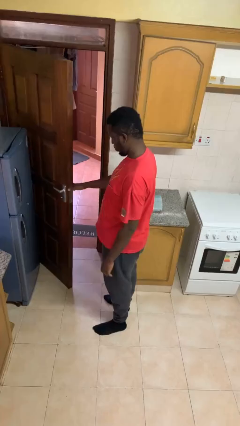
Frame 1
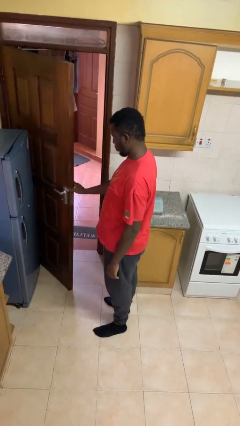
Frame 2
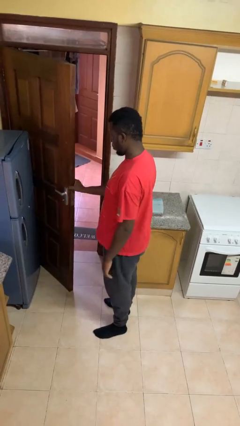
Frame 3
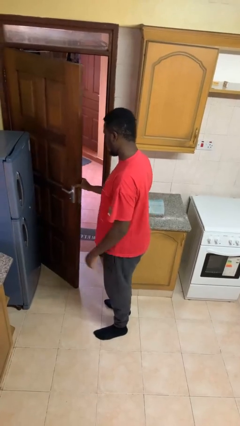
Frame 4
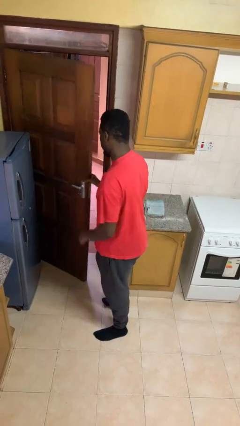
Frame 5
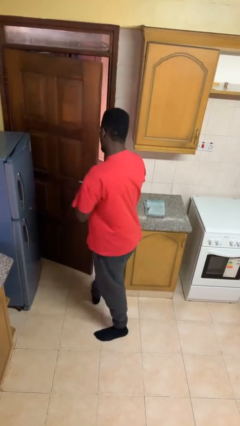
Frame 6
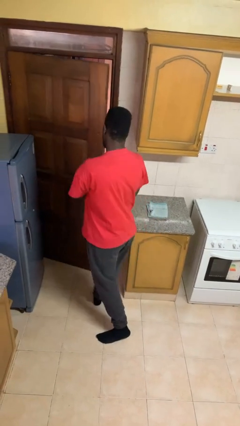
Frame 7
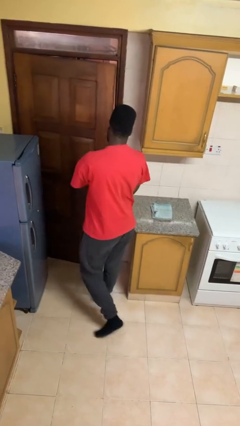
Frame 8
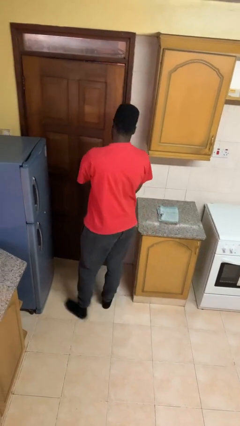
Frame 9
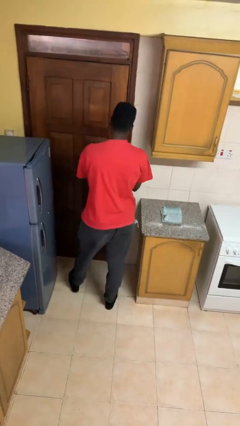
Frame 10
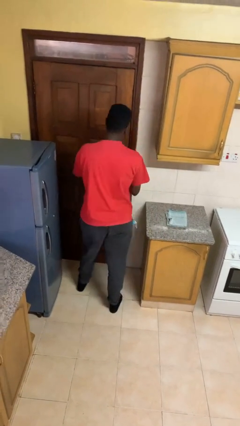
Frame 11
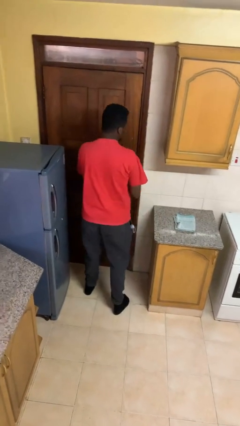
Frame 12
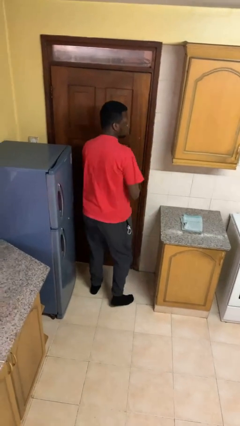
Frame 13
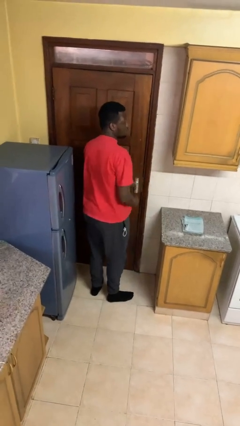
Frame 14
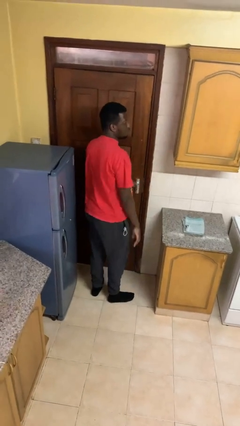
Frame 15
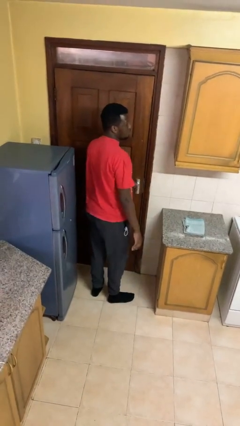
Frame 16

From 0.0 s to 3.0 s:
person closes facility door

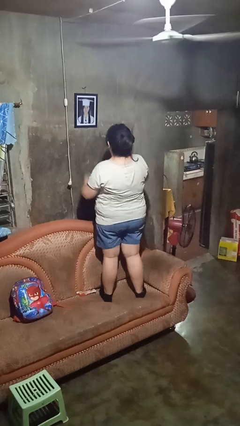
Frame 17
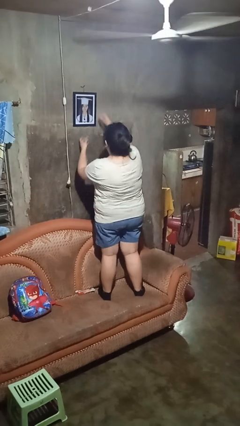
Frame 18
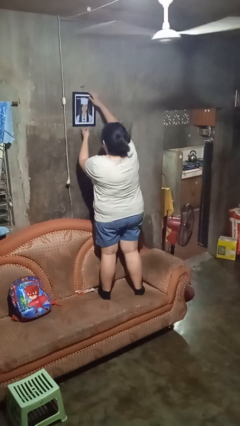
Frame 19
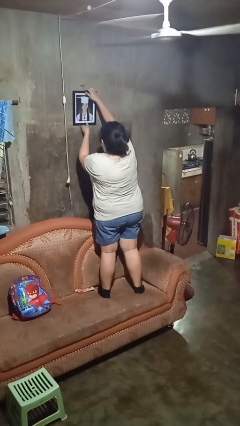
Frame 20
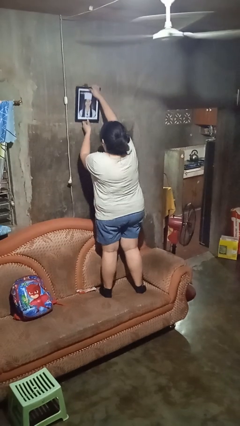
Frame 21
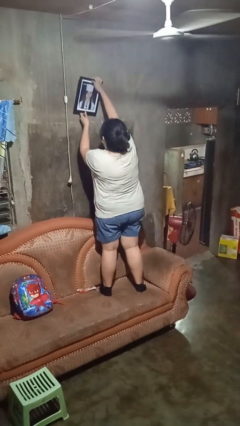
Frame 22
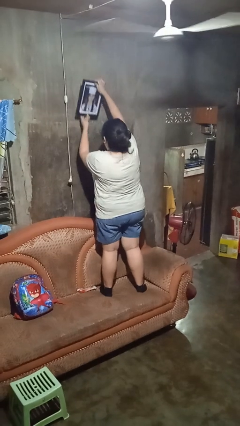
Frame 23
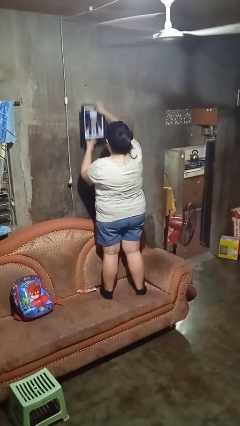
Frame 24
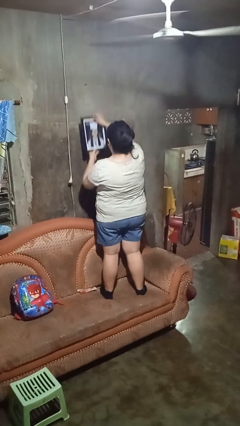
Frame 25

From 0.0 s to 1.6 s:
person takes down picture frame

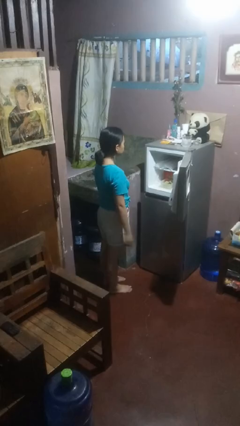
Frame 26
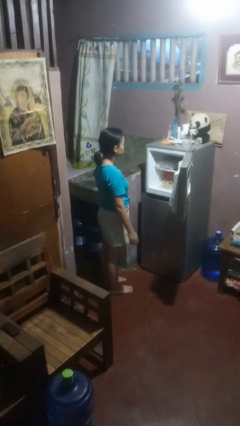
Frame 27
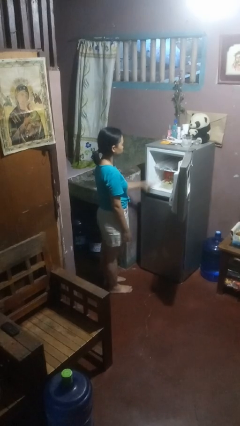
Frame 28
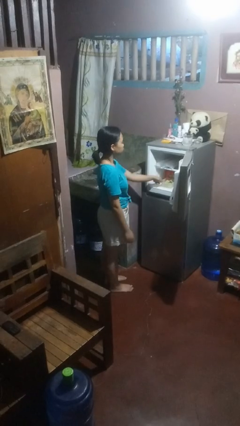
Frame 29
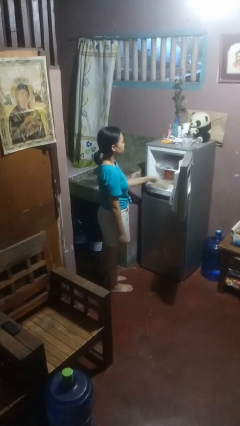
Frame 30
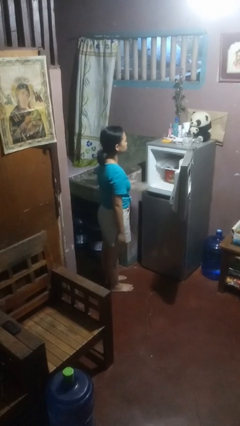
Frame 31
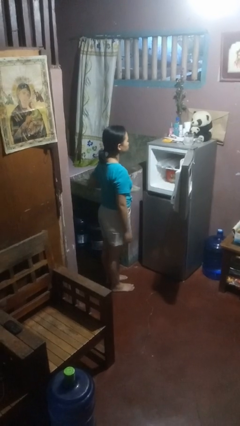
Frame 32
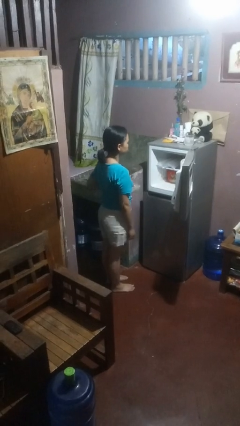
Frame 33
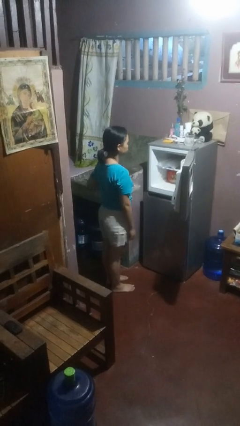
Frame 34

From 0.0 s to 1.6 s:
person takes object from refrigerator

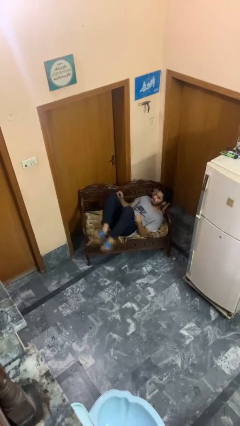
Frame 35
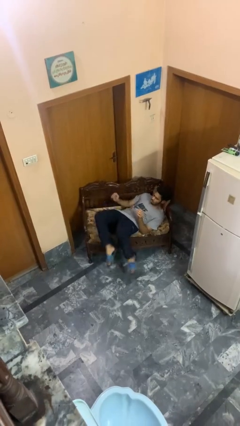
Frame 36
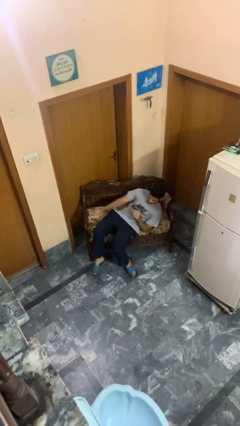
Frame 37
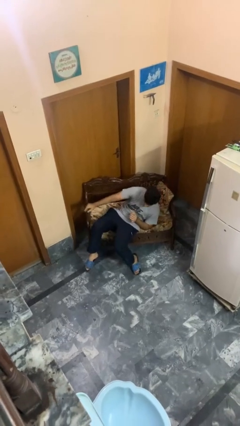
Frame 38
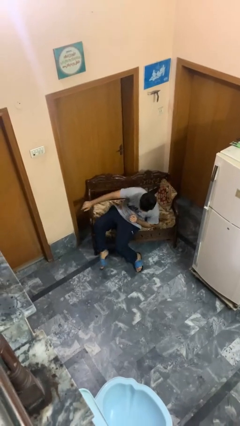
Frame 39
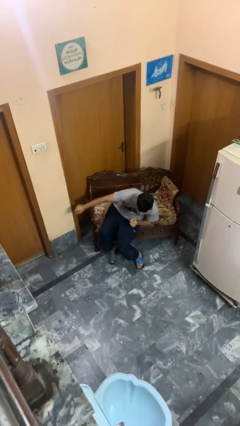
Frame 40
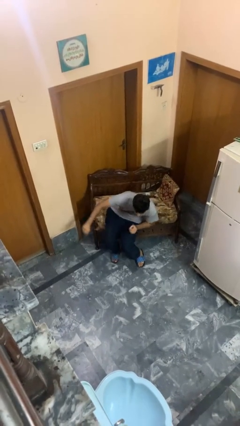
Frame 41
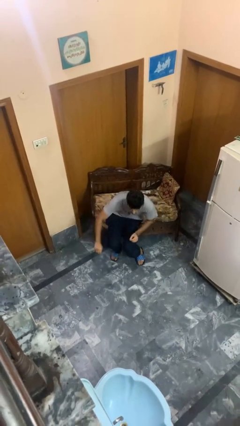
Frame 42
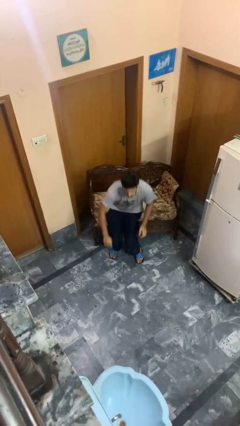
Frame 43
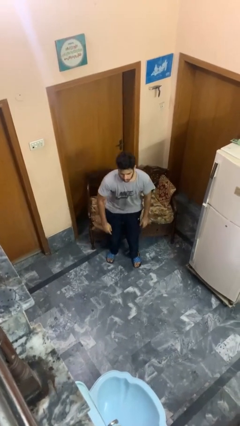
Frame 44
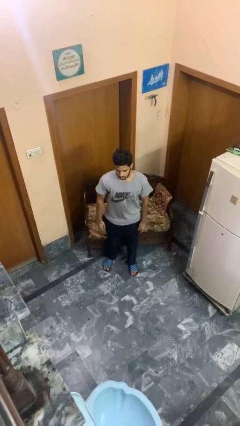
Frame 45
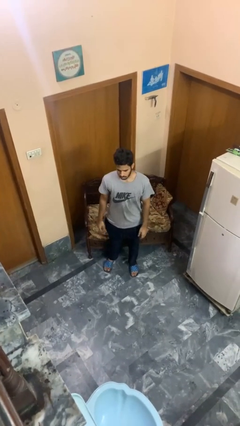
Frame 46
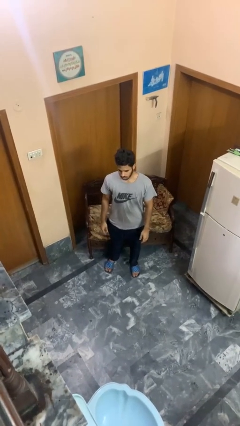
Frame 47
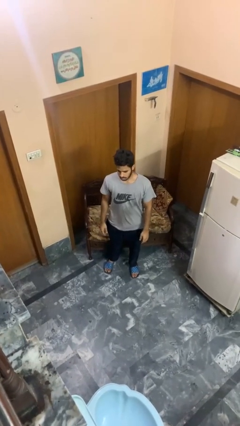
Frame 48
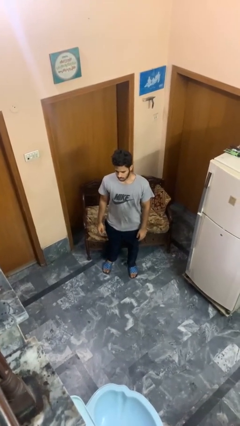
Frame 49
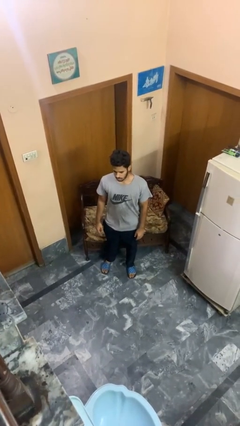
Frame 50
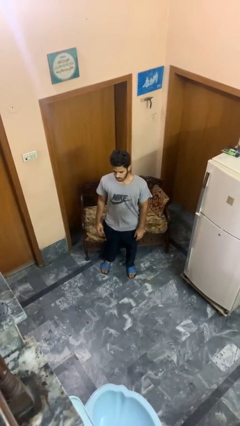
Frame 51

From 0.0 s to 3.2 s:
person stands up

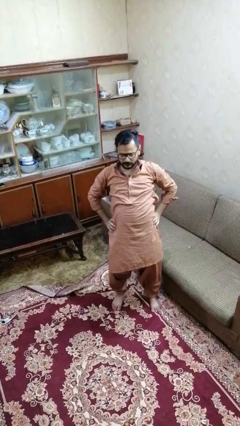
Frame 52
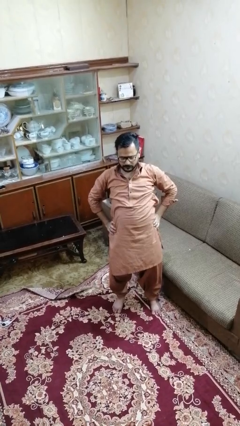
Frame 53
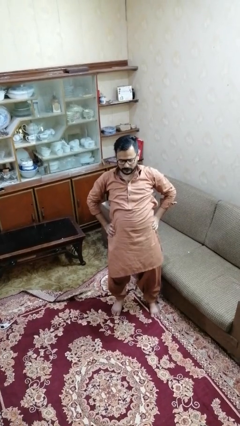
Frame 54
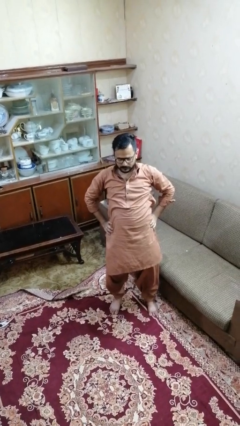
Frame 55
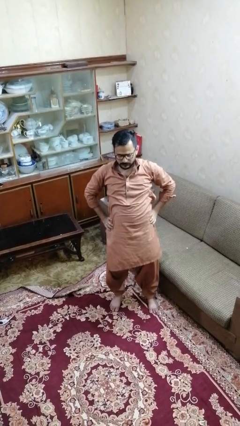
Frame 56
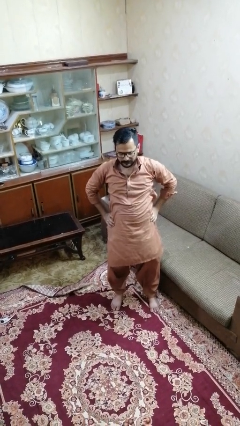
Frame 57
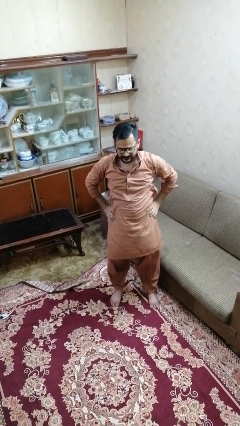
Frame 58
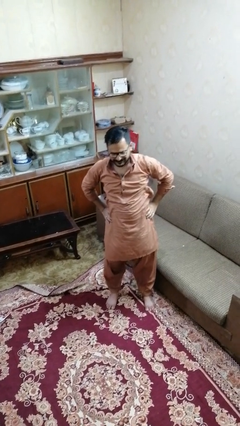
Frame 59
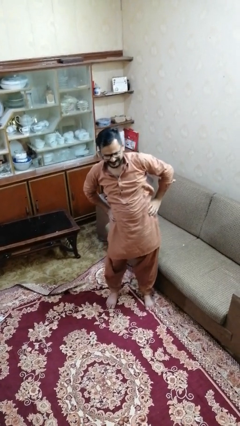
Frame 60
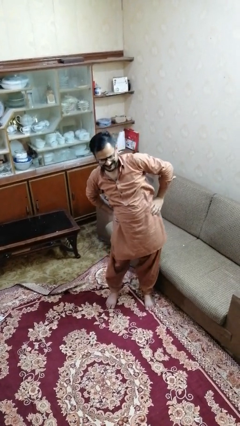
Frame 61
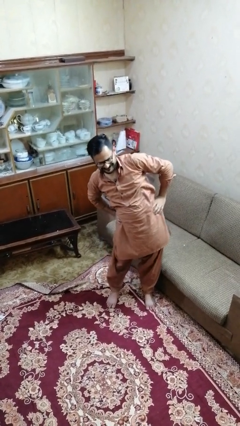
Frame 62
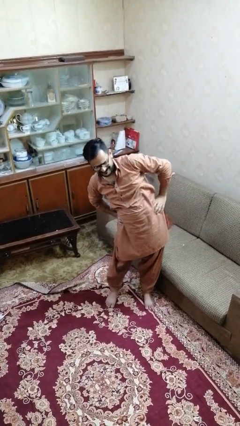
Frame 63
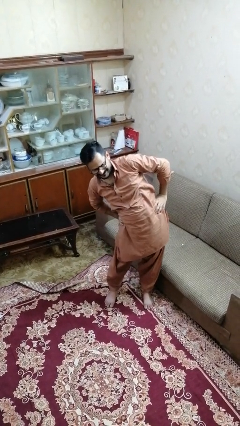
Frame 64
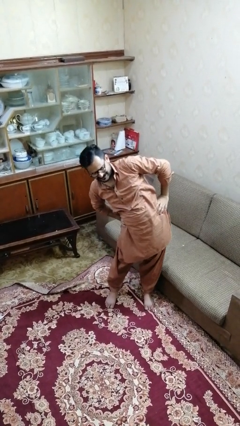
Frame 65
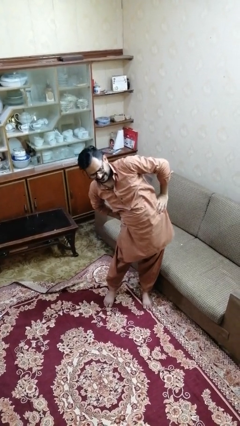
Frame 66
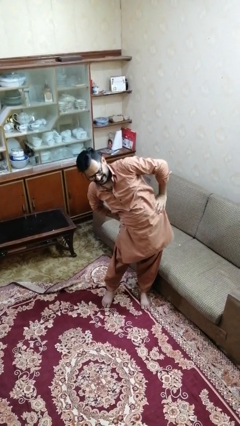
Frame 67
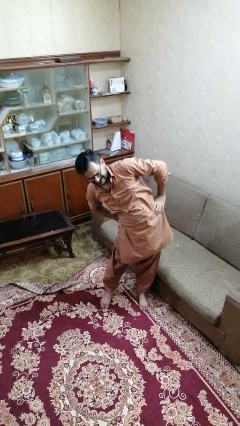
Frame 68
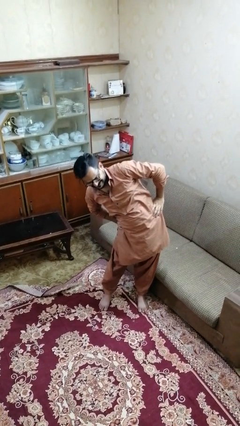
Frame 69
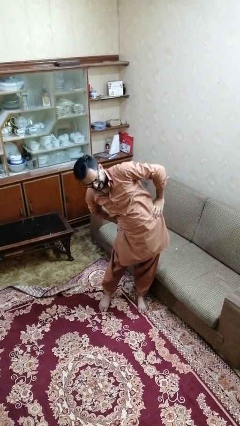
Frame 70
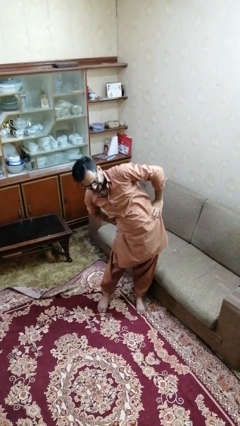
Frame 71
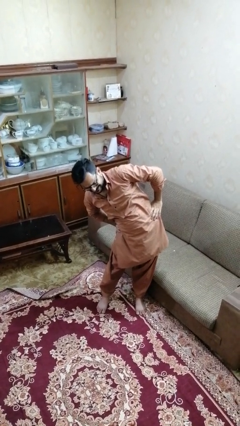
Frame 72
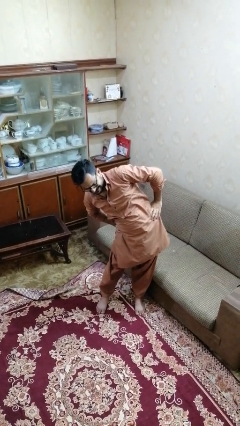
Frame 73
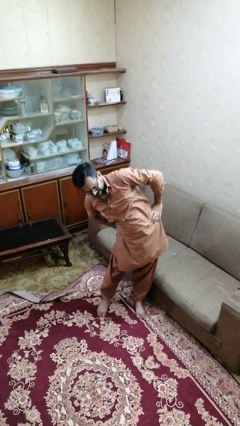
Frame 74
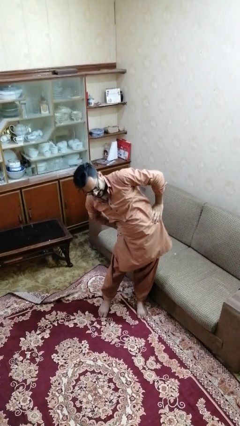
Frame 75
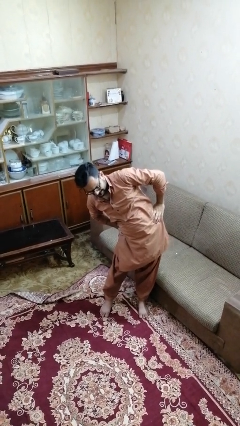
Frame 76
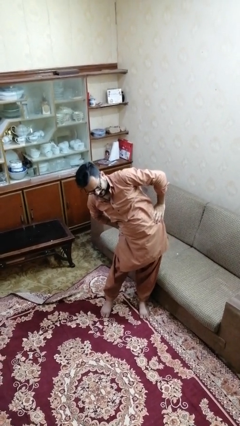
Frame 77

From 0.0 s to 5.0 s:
person stretches arms to side

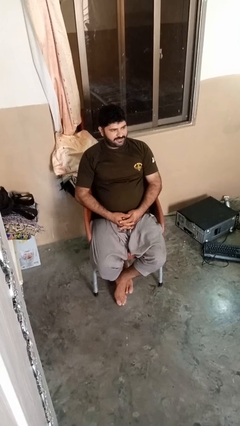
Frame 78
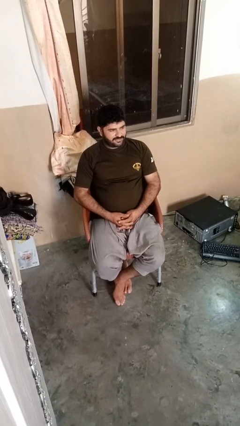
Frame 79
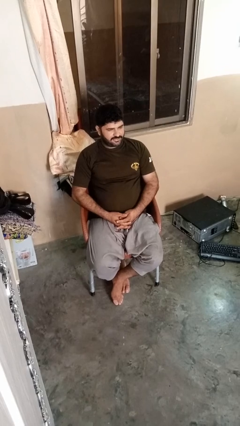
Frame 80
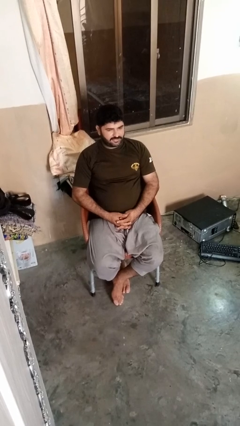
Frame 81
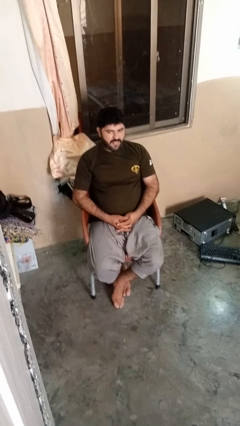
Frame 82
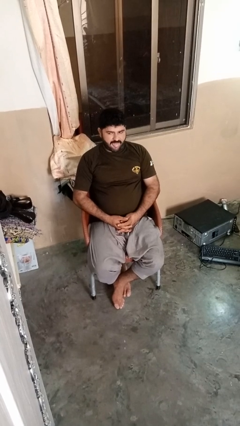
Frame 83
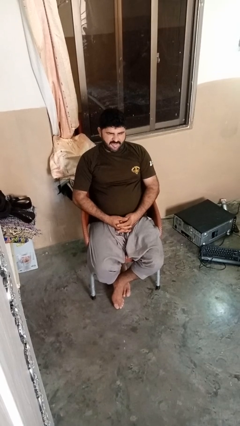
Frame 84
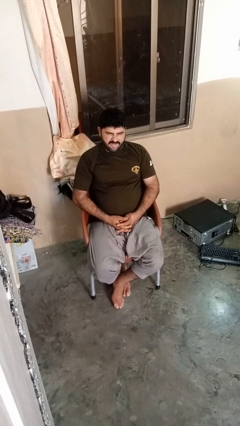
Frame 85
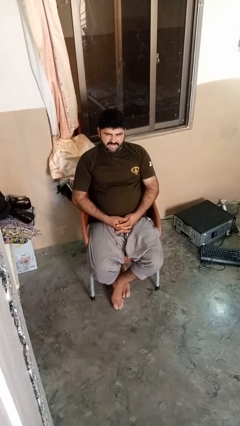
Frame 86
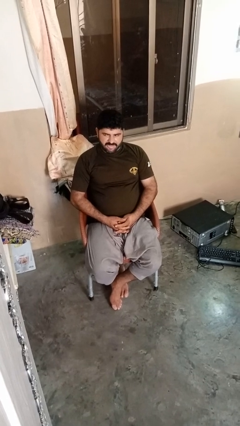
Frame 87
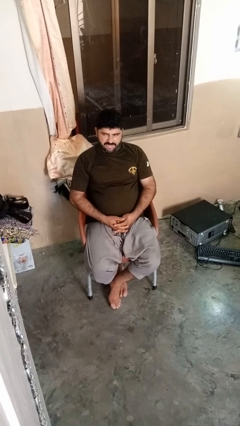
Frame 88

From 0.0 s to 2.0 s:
person sticks out tongue

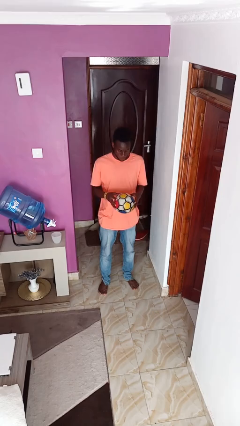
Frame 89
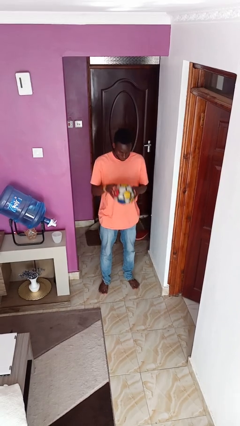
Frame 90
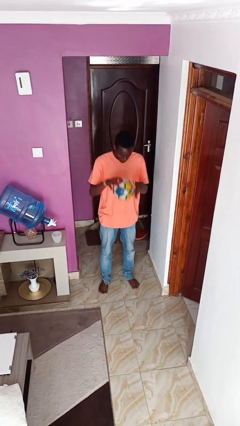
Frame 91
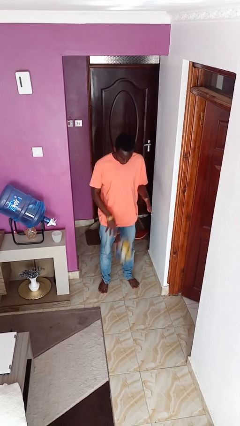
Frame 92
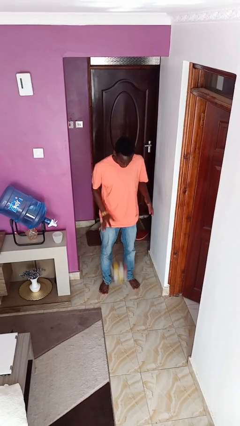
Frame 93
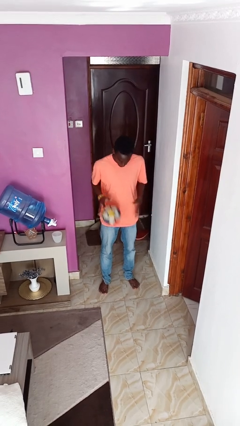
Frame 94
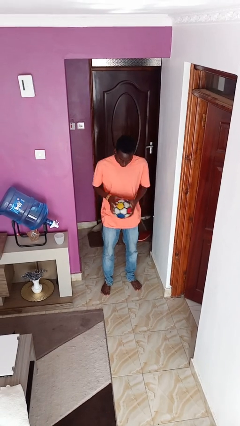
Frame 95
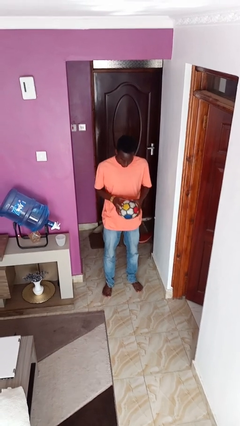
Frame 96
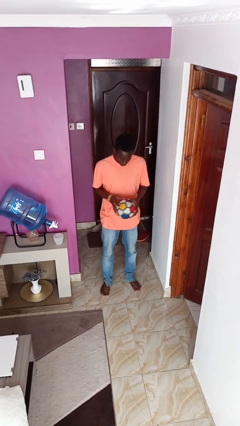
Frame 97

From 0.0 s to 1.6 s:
person bounces ball on floor
